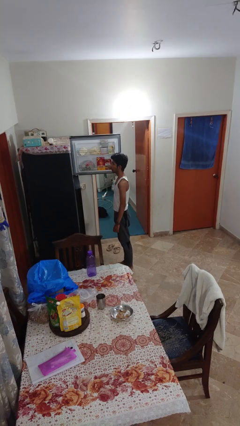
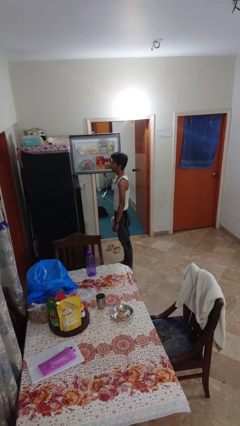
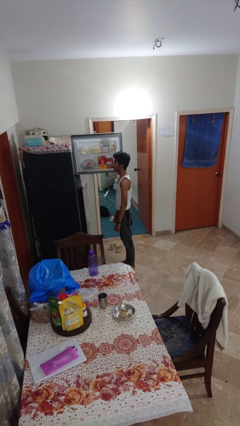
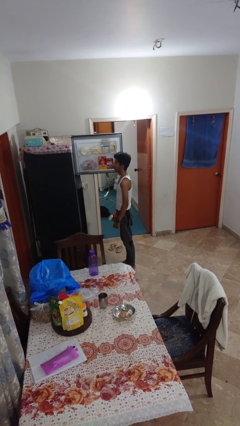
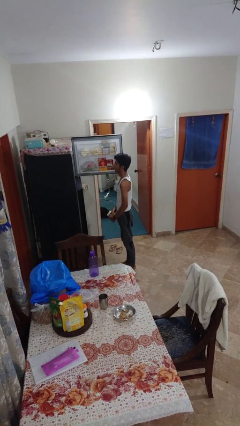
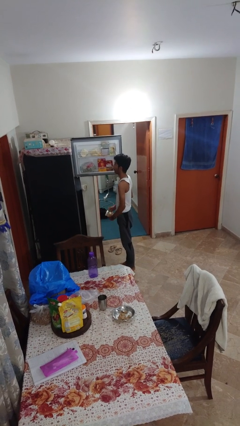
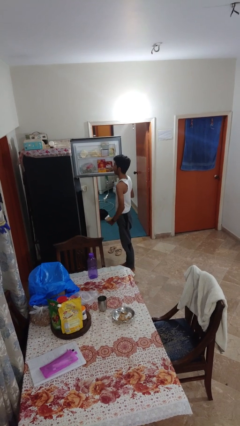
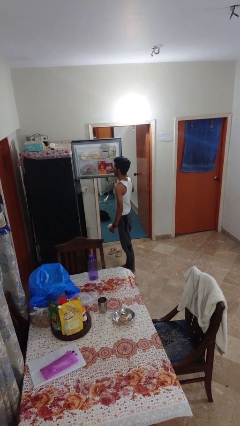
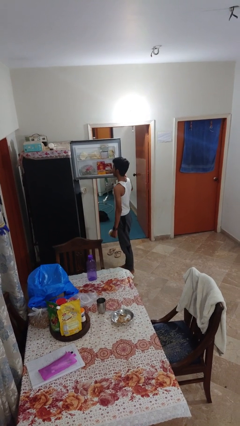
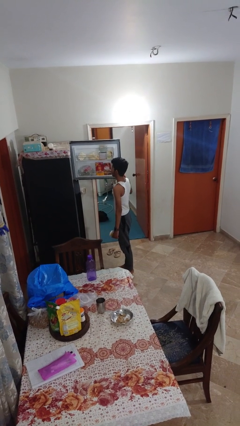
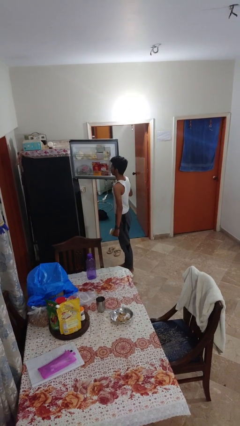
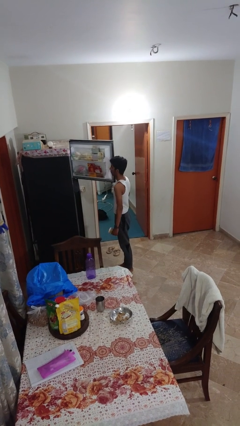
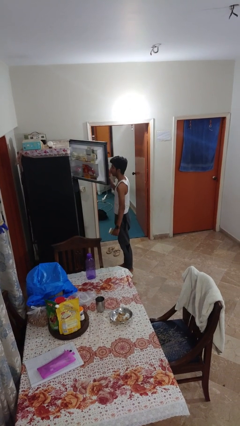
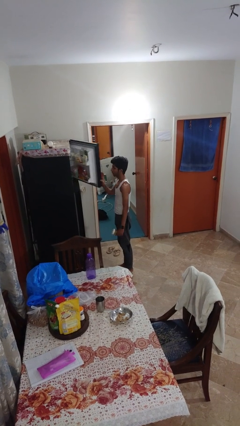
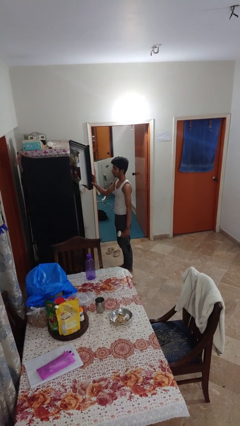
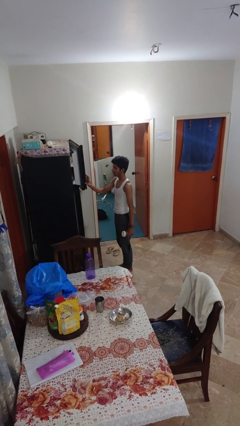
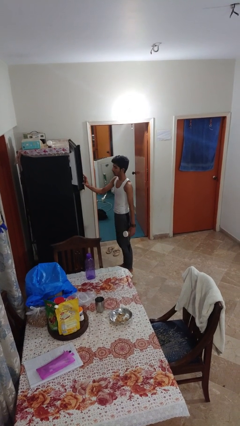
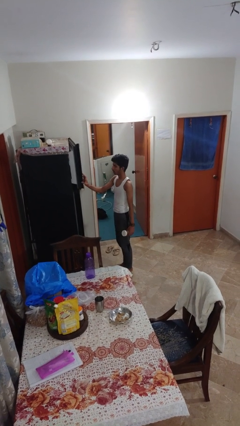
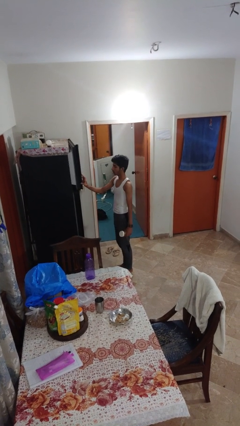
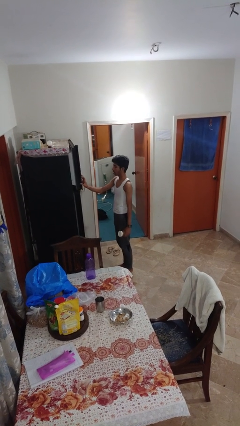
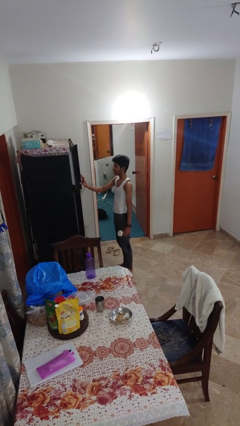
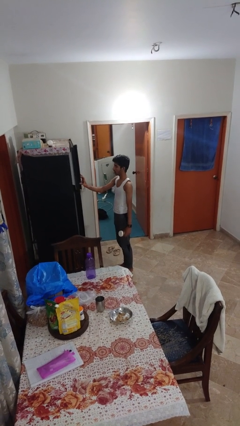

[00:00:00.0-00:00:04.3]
person closes refrigerator

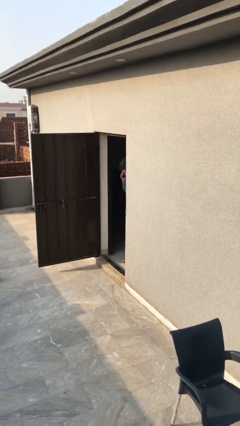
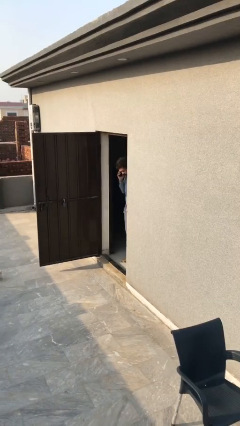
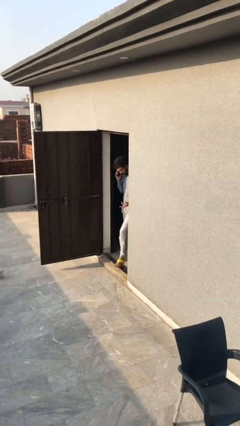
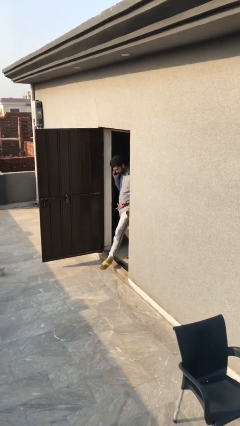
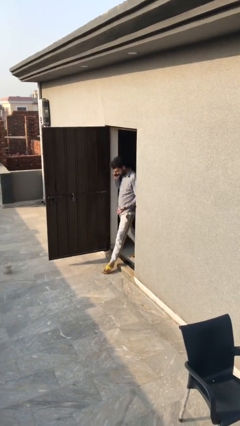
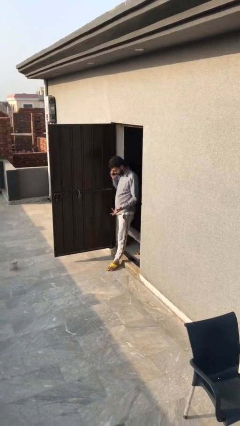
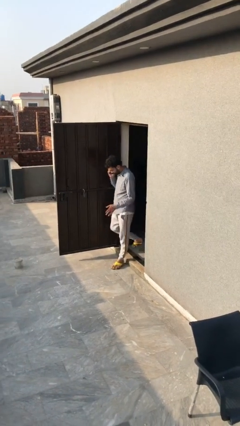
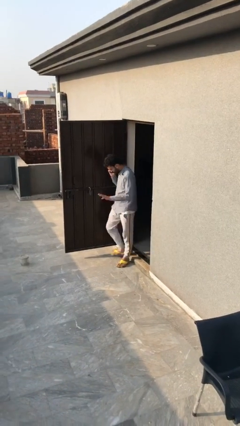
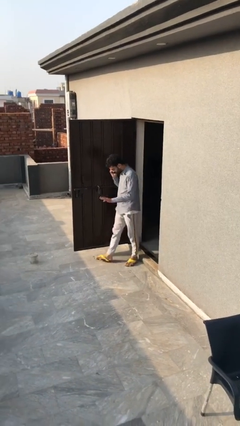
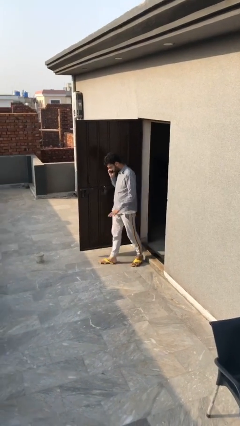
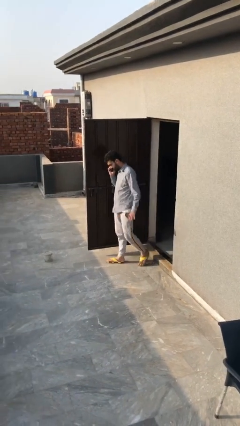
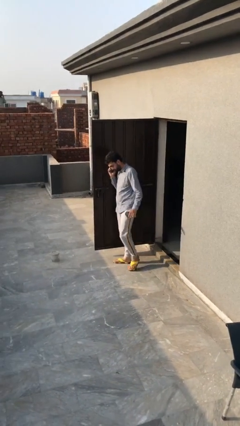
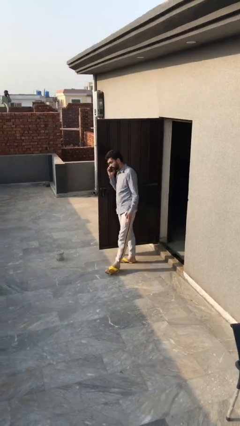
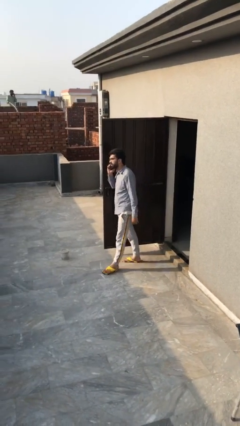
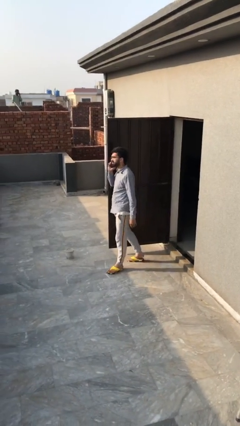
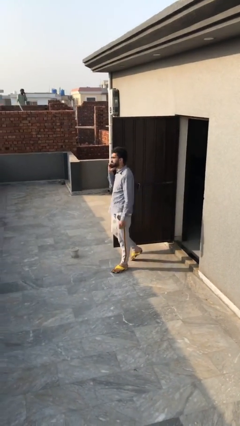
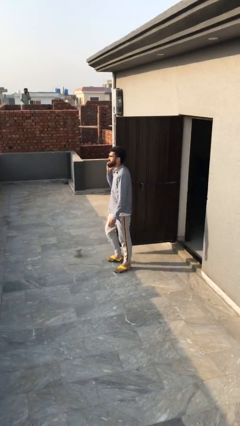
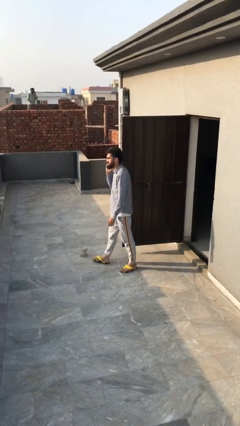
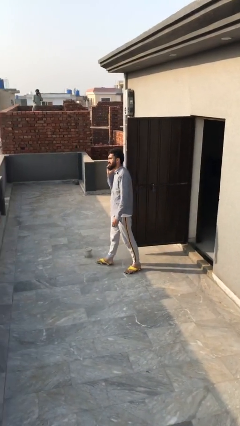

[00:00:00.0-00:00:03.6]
person enters scene through structure

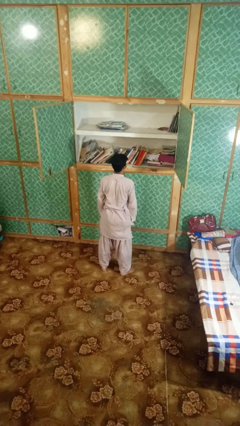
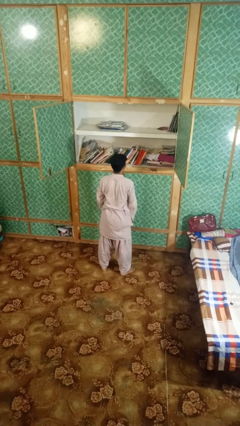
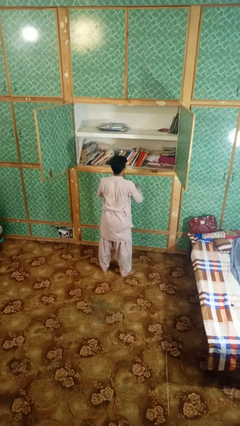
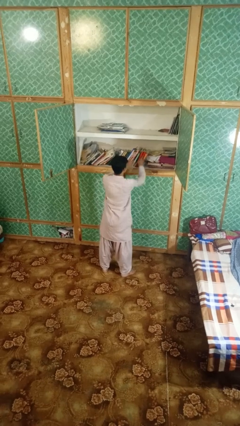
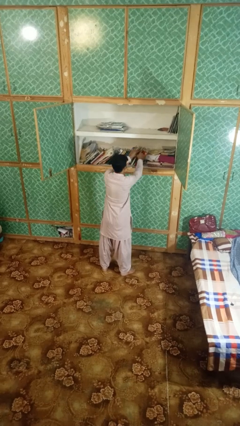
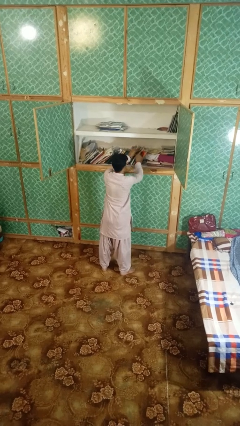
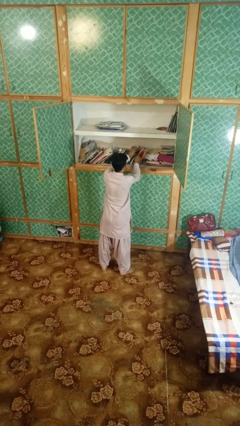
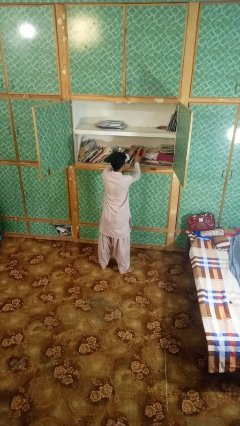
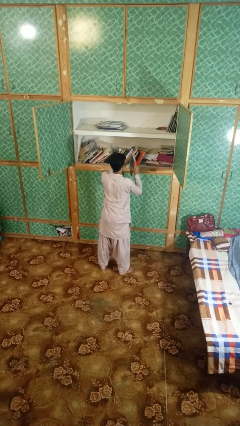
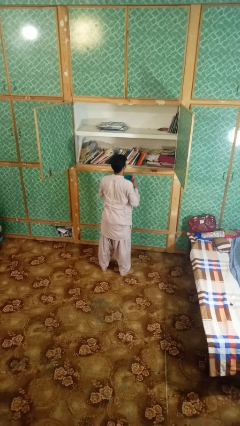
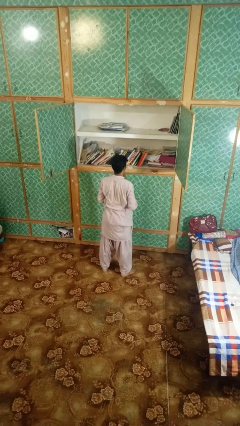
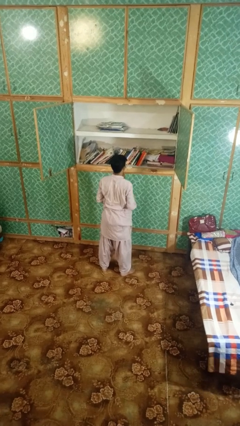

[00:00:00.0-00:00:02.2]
person picks up object from shelf

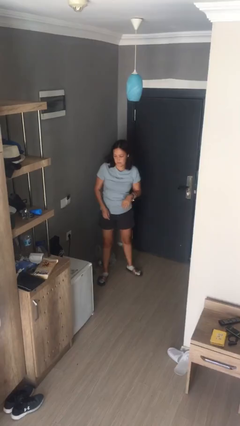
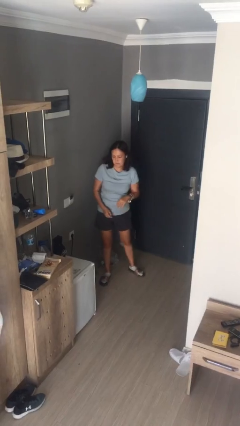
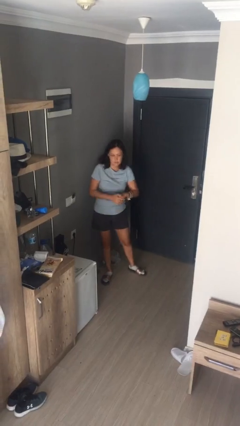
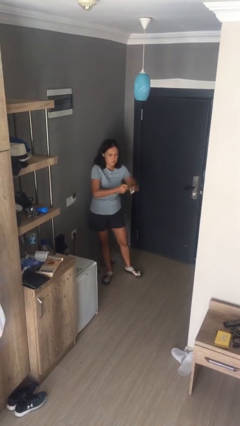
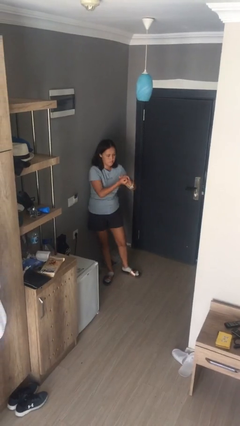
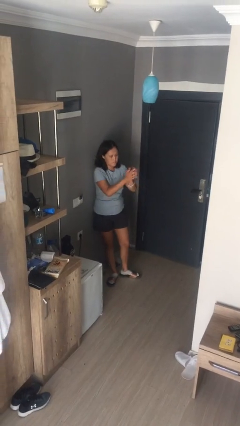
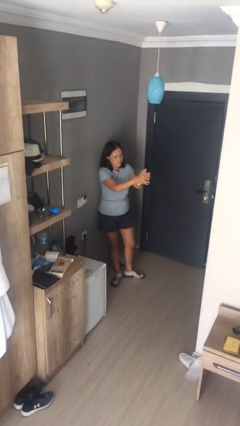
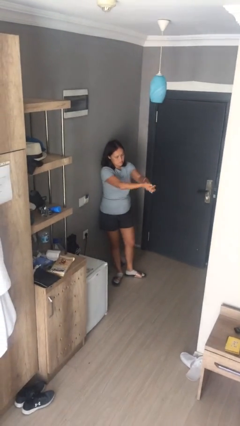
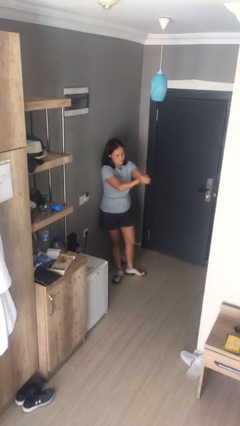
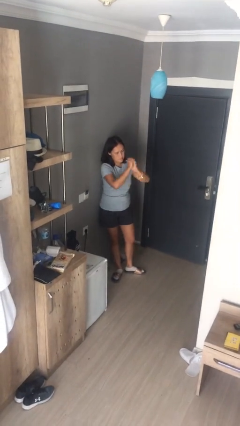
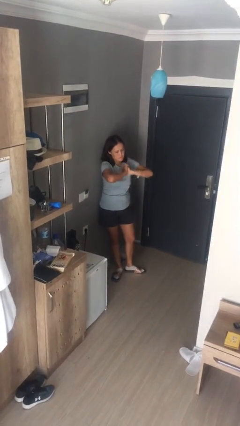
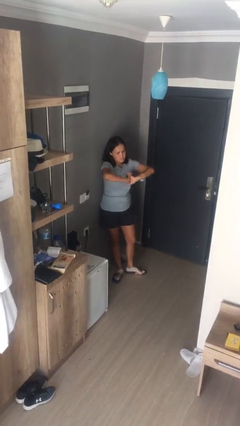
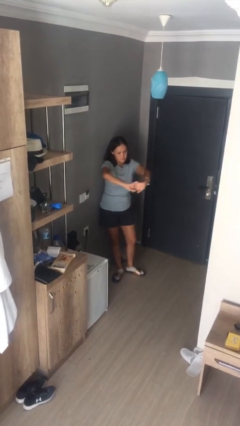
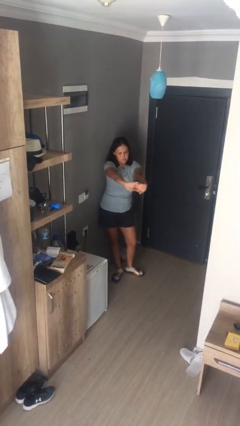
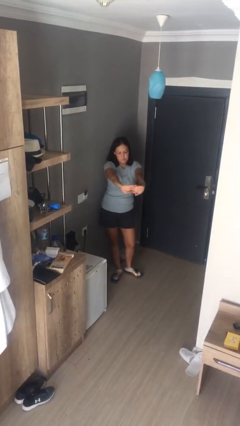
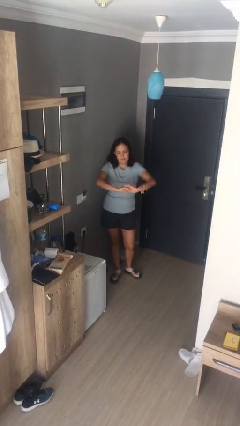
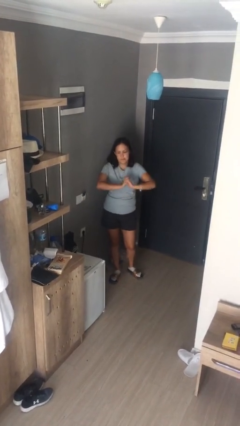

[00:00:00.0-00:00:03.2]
person cracks knuckles

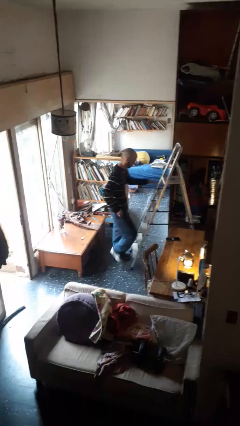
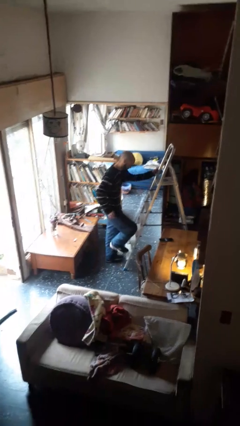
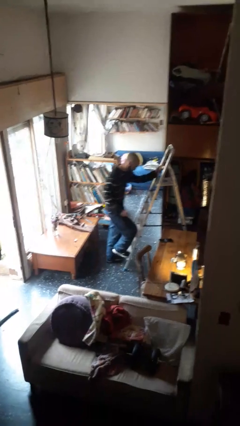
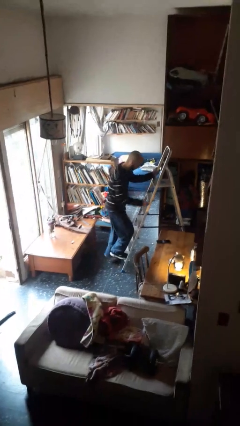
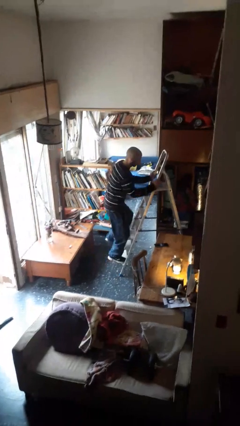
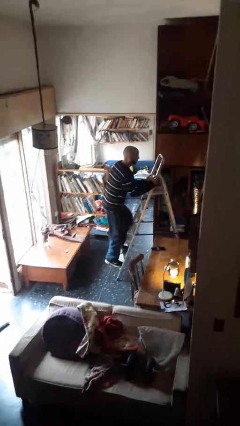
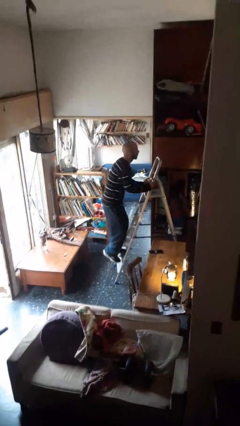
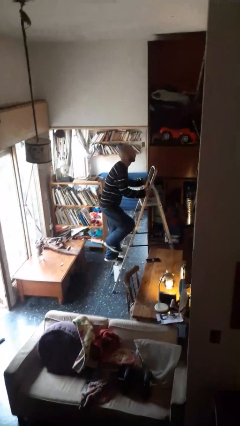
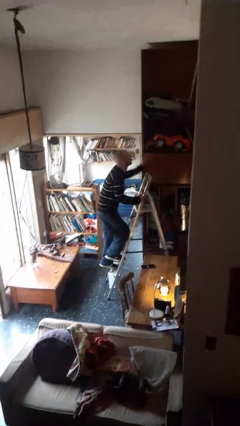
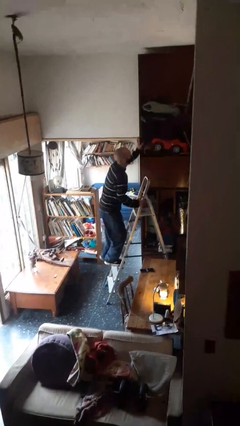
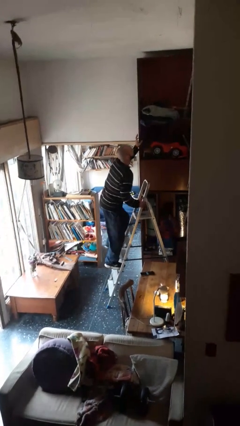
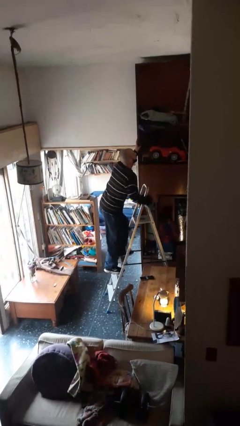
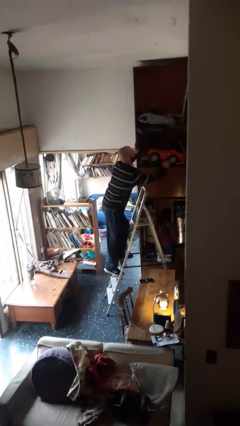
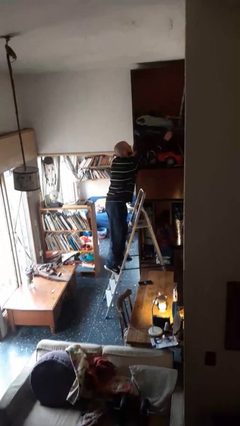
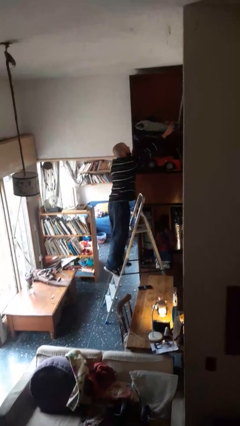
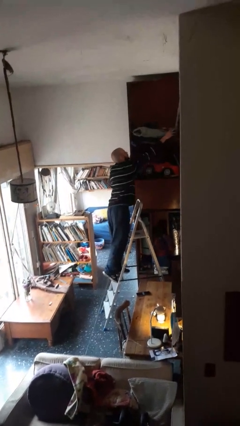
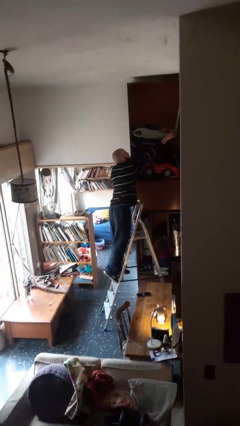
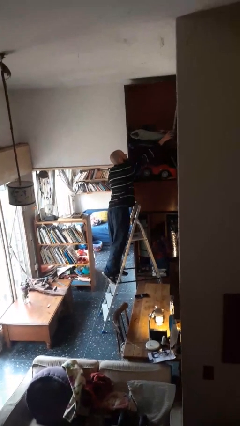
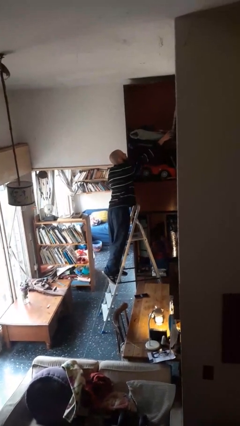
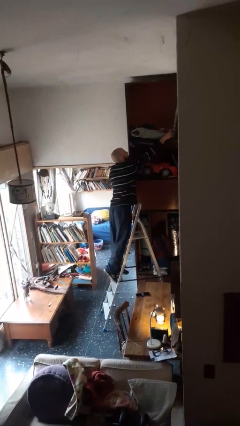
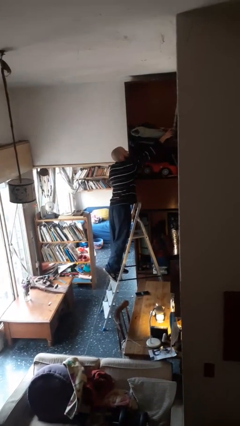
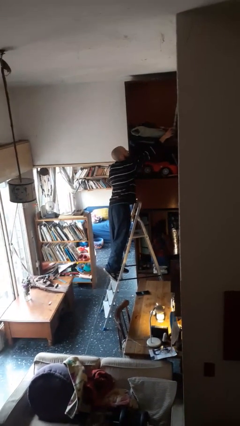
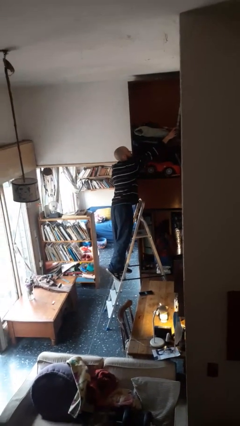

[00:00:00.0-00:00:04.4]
person climbs up ladder
